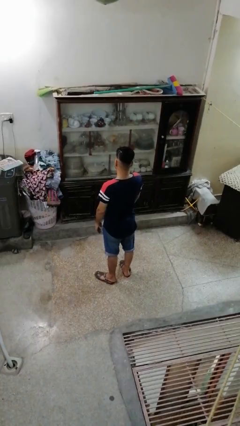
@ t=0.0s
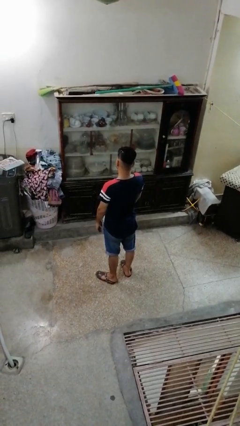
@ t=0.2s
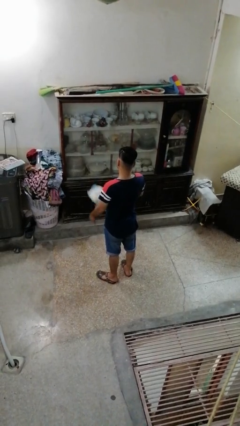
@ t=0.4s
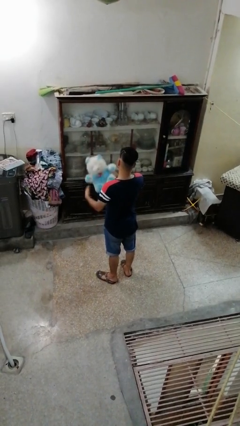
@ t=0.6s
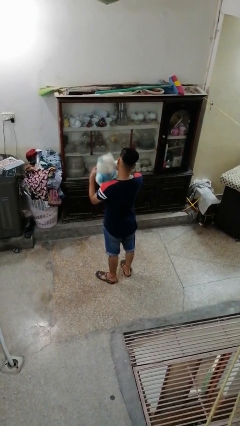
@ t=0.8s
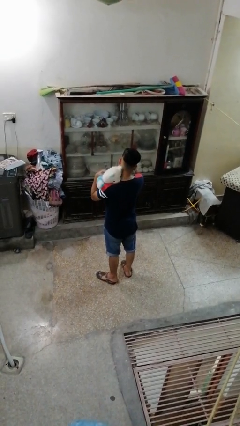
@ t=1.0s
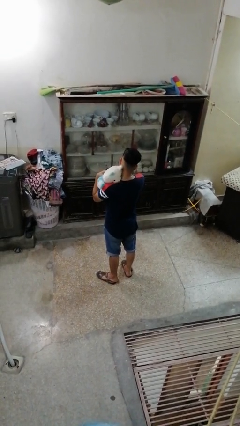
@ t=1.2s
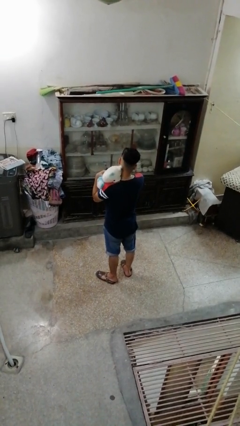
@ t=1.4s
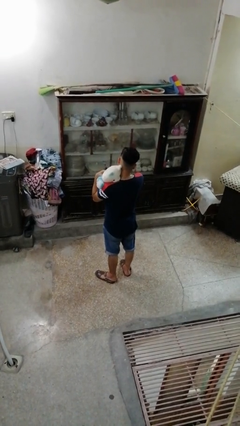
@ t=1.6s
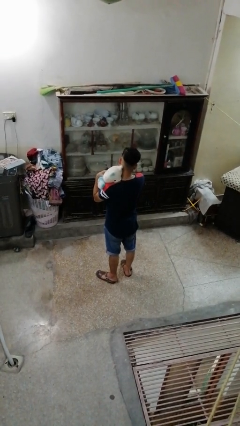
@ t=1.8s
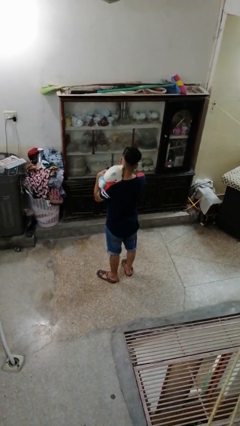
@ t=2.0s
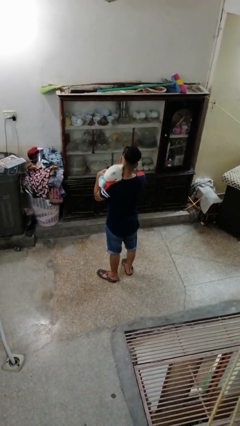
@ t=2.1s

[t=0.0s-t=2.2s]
person hugs stuffed animal

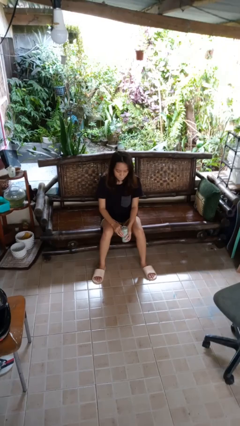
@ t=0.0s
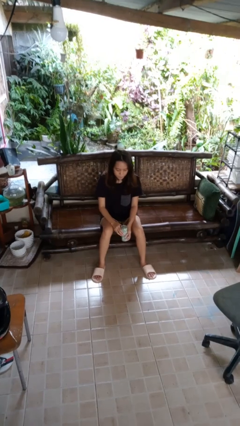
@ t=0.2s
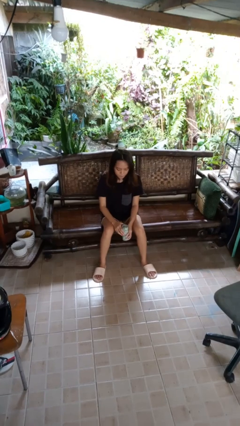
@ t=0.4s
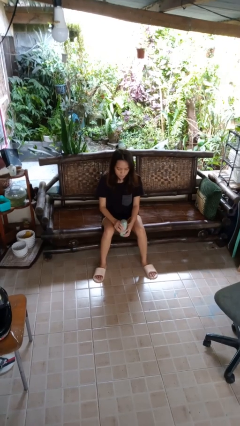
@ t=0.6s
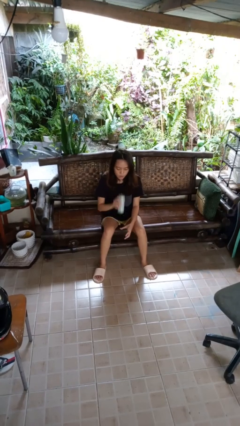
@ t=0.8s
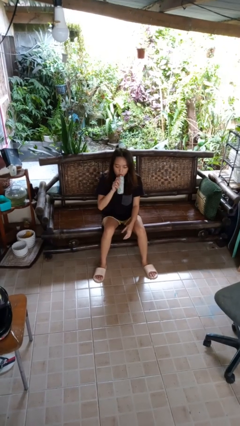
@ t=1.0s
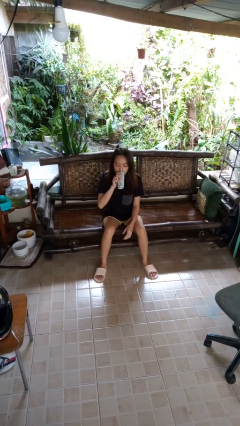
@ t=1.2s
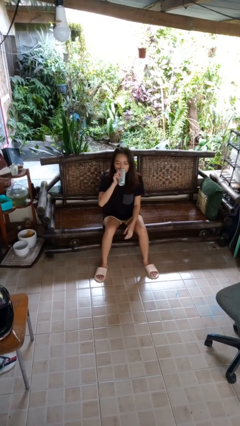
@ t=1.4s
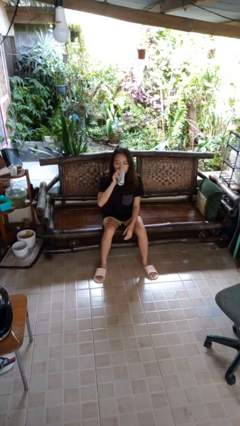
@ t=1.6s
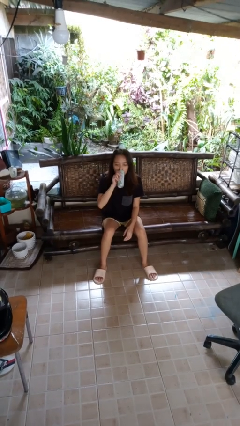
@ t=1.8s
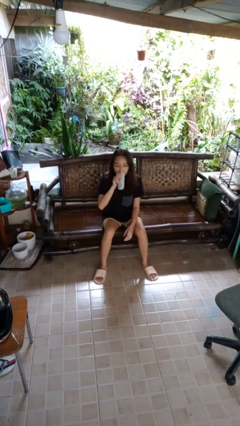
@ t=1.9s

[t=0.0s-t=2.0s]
person drinks from beverage can

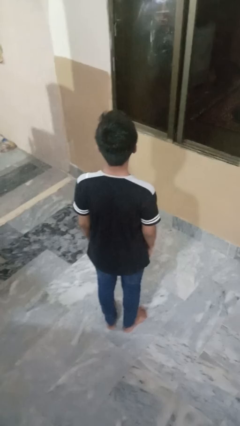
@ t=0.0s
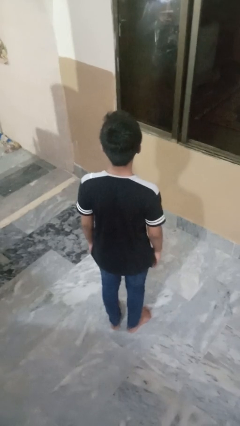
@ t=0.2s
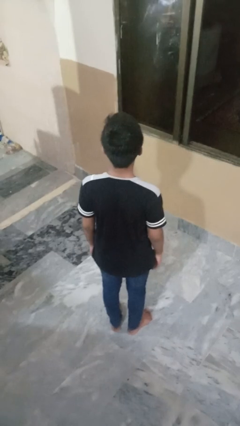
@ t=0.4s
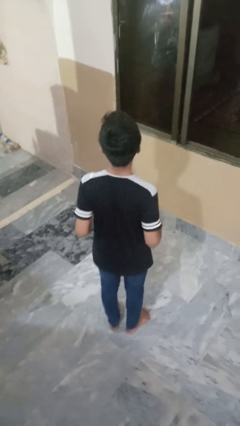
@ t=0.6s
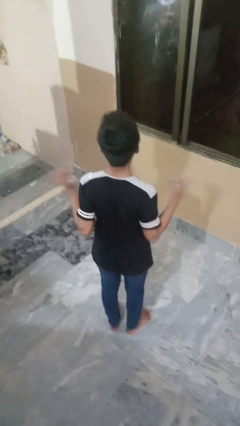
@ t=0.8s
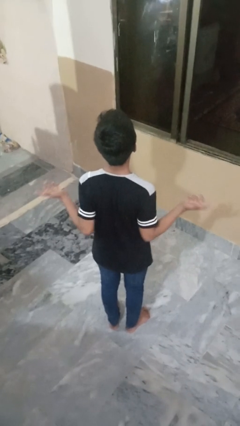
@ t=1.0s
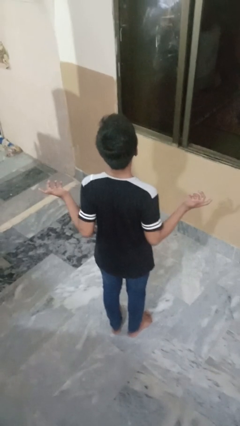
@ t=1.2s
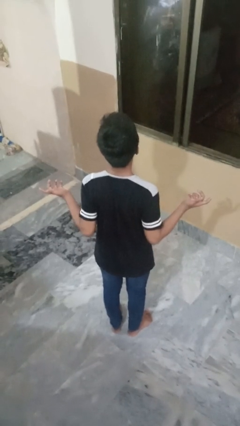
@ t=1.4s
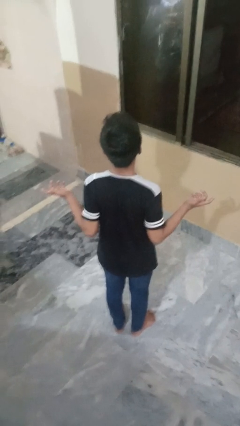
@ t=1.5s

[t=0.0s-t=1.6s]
person shrugs

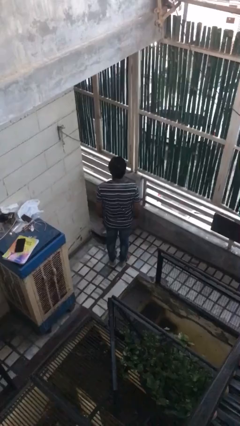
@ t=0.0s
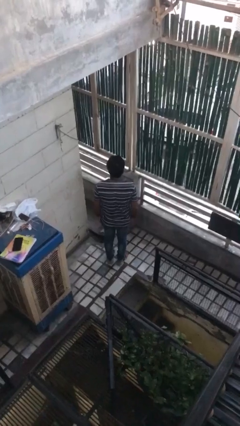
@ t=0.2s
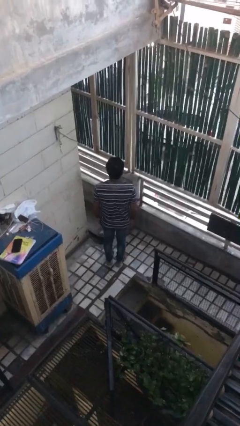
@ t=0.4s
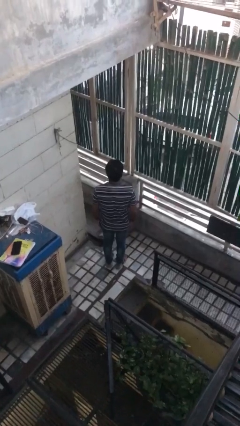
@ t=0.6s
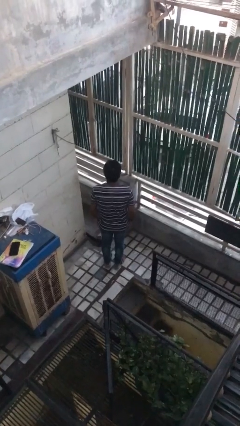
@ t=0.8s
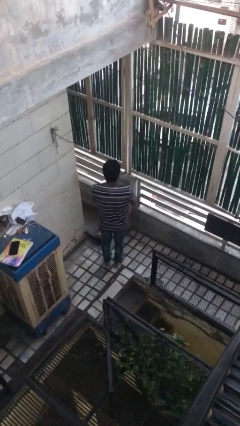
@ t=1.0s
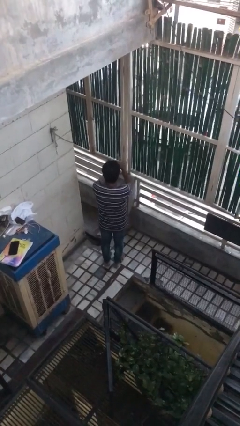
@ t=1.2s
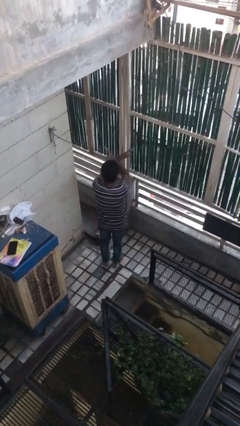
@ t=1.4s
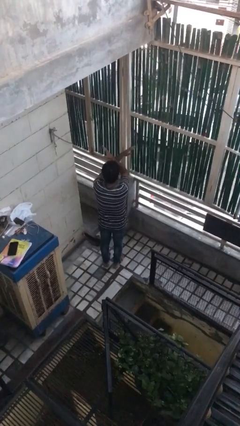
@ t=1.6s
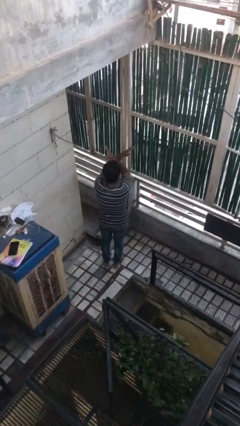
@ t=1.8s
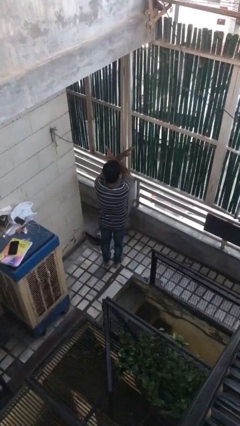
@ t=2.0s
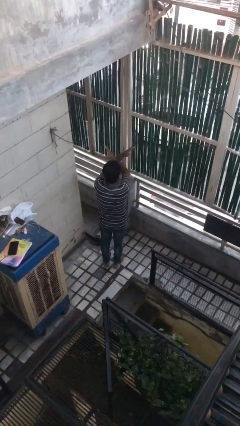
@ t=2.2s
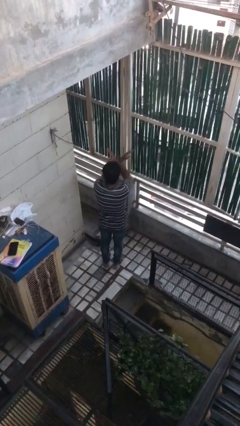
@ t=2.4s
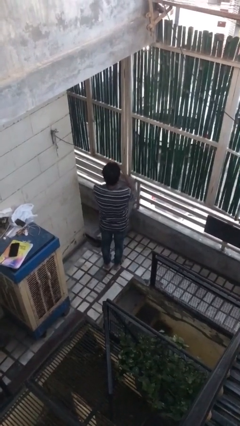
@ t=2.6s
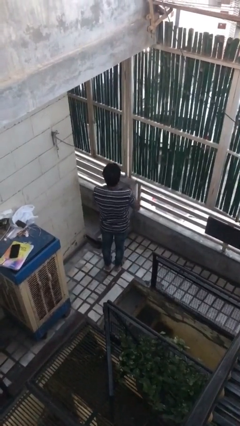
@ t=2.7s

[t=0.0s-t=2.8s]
person gestures arms x

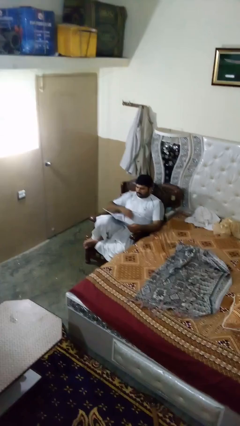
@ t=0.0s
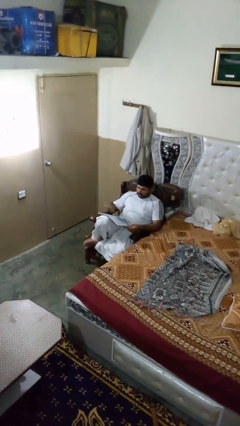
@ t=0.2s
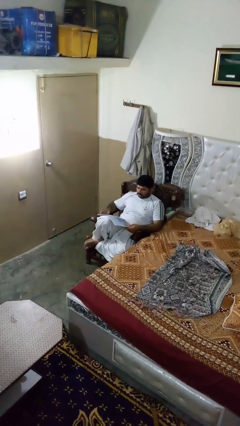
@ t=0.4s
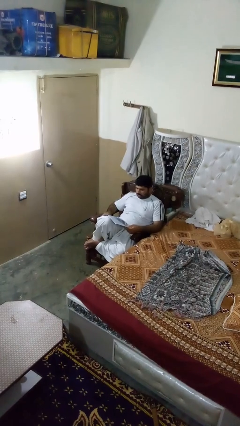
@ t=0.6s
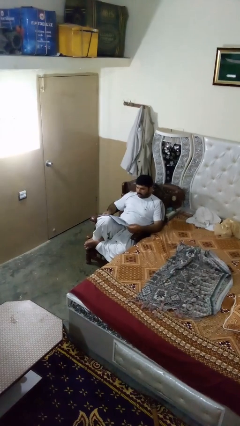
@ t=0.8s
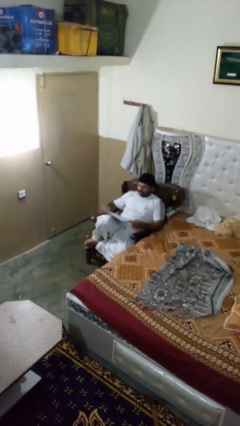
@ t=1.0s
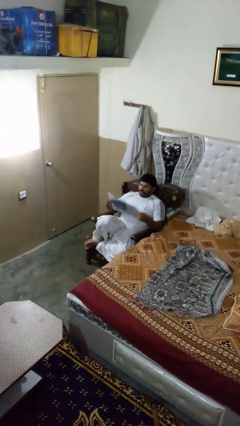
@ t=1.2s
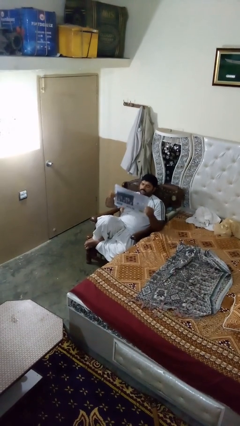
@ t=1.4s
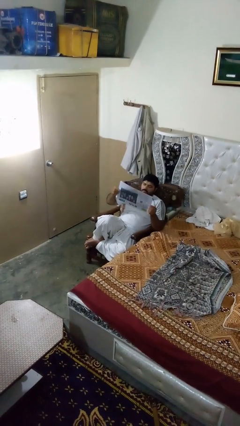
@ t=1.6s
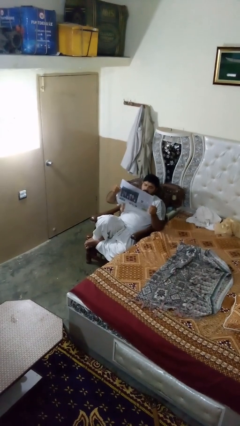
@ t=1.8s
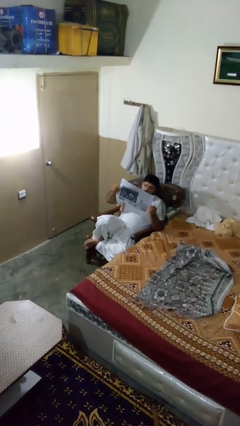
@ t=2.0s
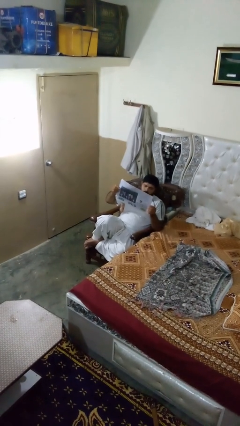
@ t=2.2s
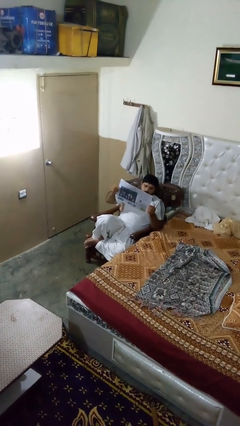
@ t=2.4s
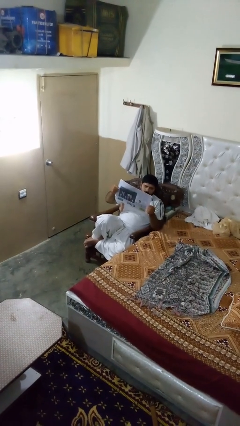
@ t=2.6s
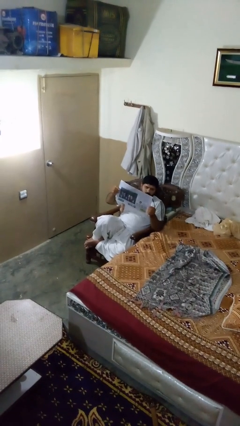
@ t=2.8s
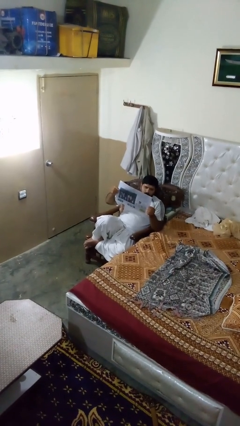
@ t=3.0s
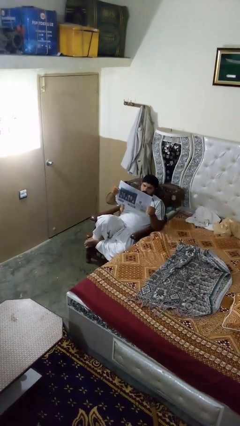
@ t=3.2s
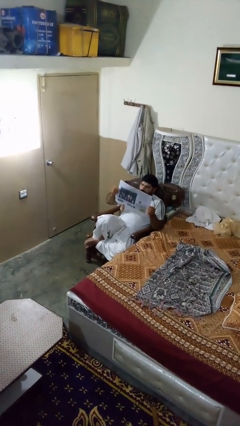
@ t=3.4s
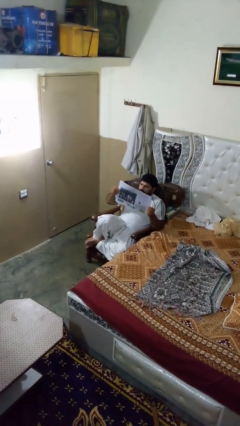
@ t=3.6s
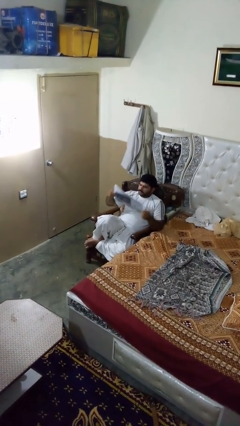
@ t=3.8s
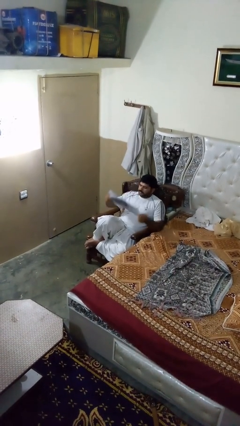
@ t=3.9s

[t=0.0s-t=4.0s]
person reads newspaper

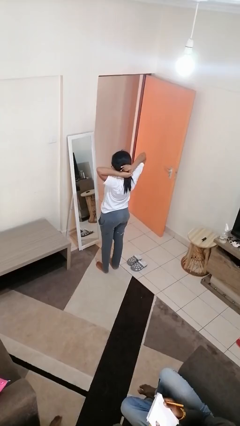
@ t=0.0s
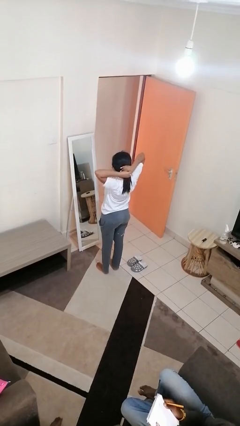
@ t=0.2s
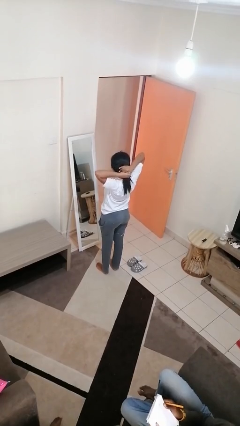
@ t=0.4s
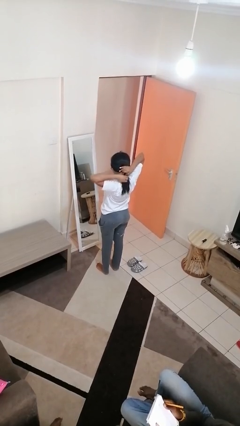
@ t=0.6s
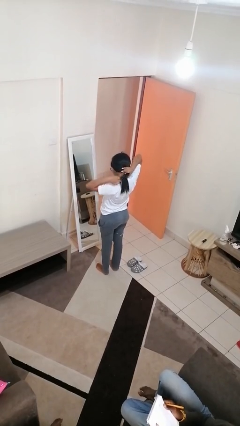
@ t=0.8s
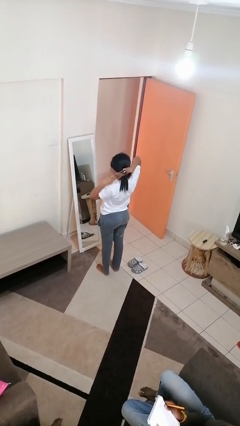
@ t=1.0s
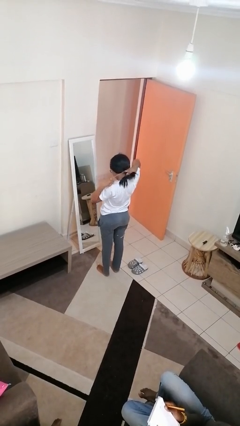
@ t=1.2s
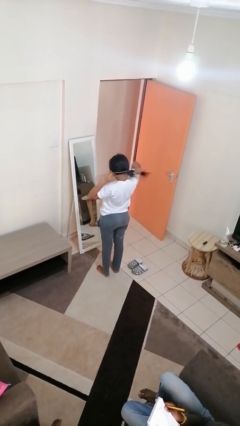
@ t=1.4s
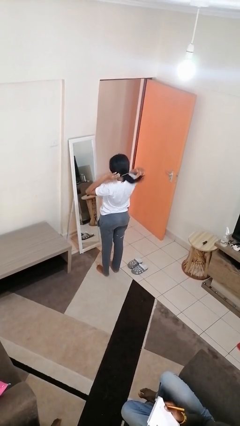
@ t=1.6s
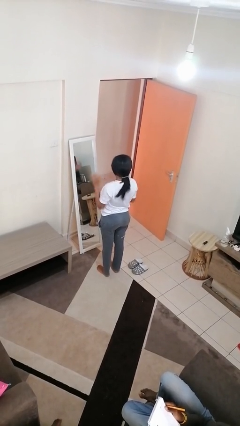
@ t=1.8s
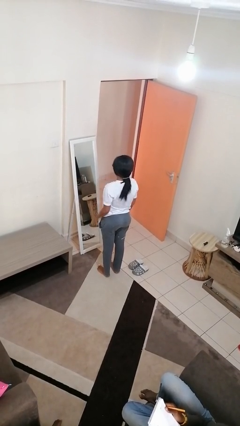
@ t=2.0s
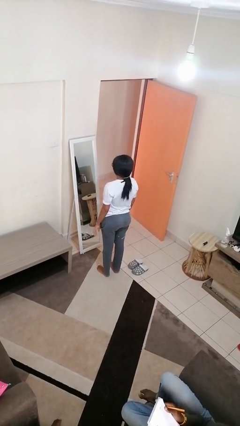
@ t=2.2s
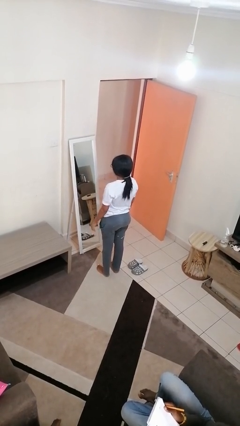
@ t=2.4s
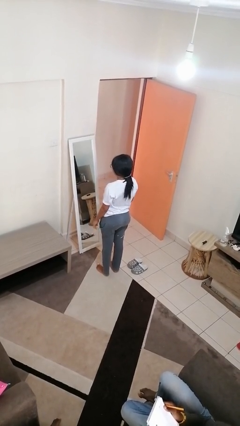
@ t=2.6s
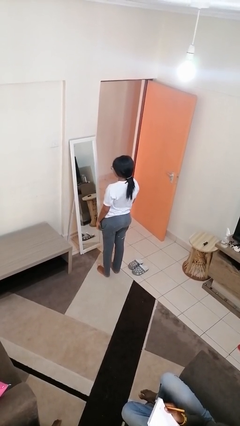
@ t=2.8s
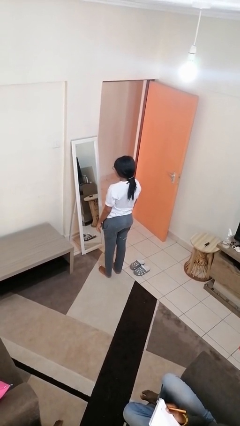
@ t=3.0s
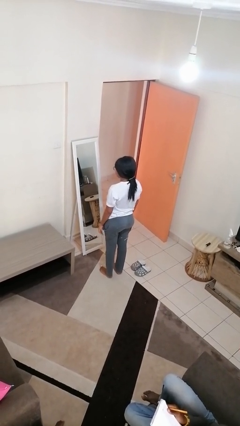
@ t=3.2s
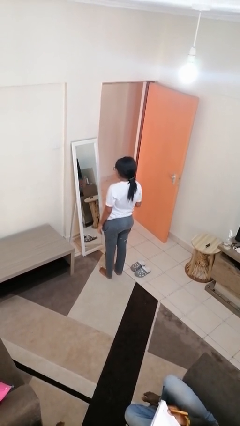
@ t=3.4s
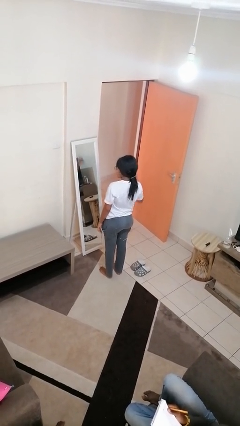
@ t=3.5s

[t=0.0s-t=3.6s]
person puts hair in ponytail

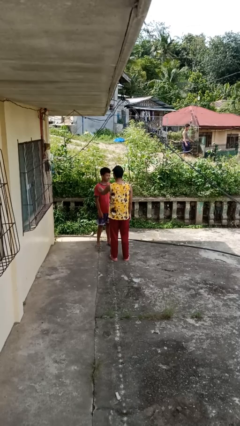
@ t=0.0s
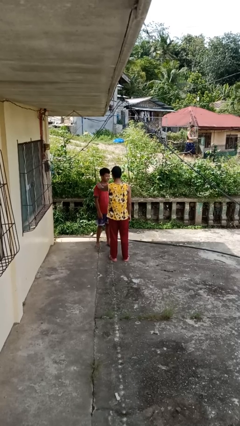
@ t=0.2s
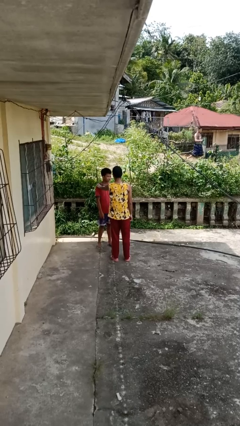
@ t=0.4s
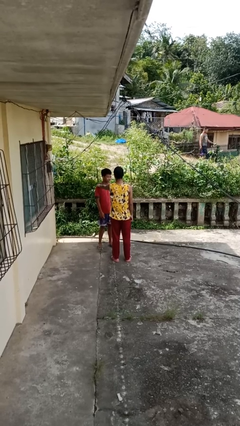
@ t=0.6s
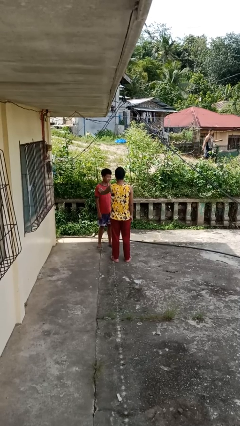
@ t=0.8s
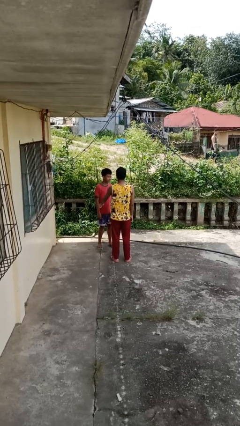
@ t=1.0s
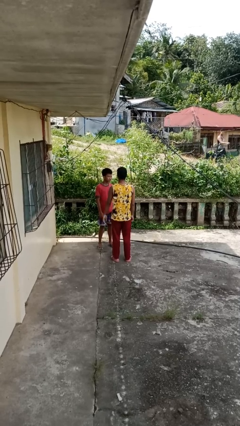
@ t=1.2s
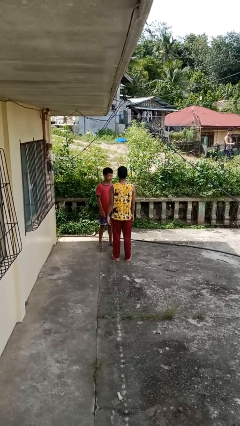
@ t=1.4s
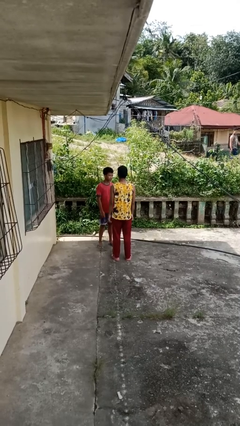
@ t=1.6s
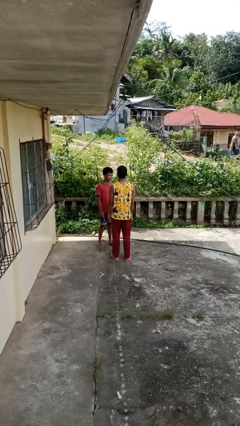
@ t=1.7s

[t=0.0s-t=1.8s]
person shoves person
